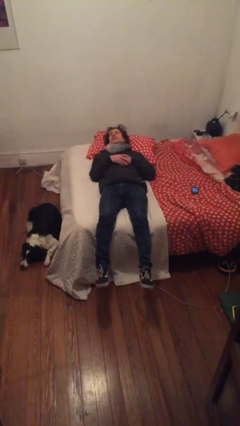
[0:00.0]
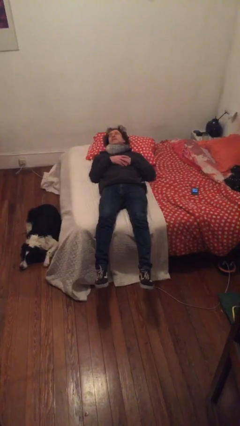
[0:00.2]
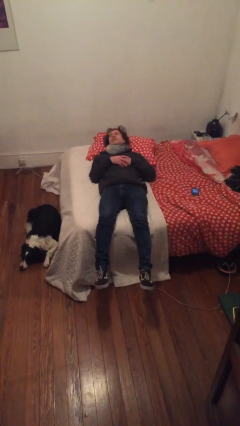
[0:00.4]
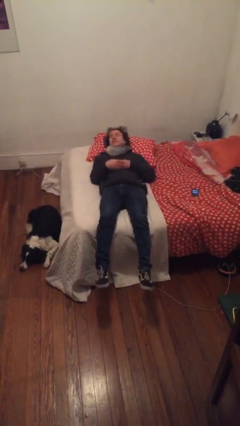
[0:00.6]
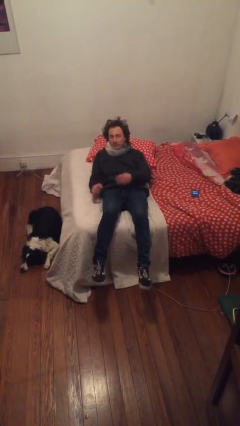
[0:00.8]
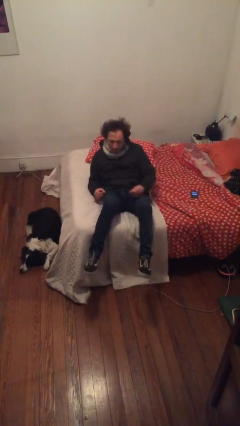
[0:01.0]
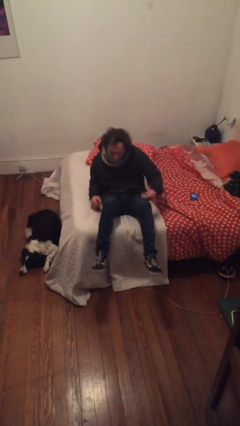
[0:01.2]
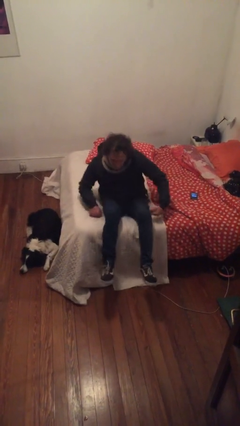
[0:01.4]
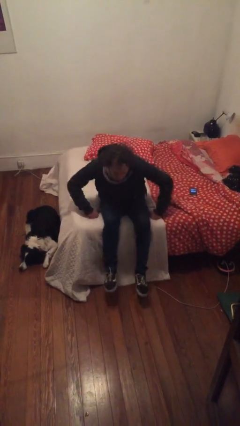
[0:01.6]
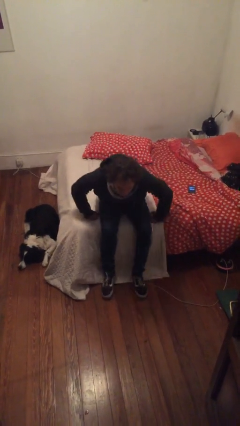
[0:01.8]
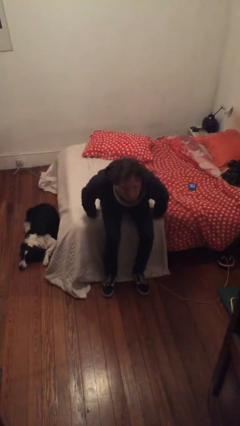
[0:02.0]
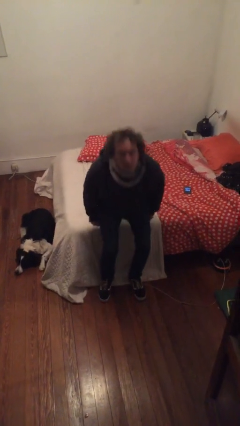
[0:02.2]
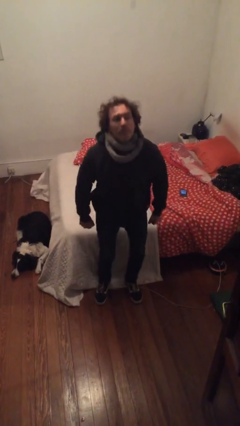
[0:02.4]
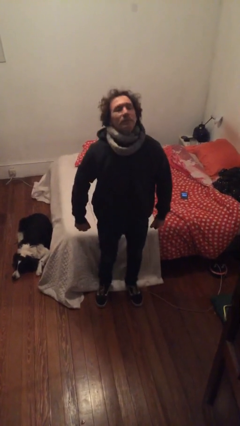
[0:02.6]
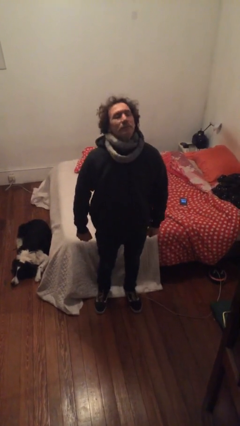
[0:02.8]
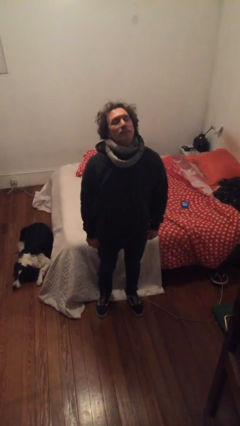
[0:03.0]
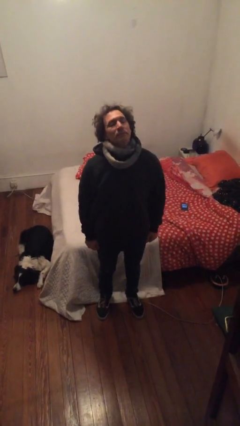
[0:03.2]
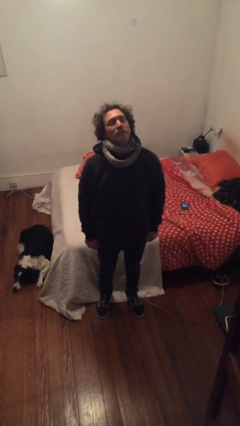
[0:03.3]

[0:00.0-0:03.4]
person stands up

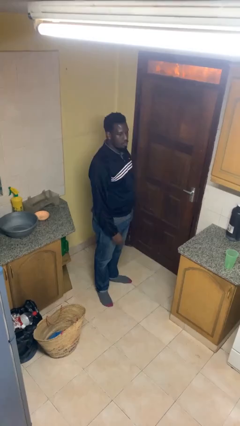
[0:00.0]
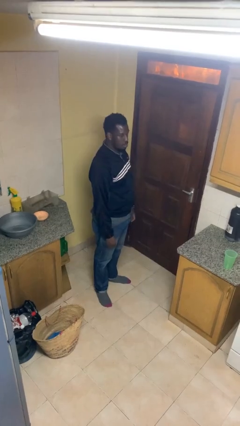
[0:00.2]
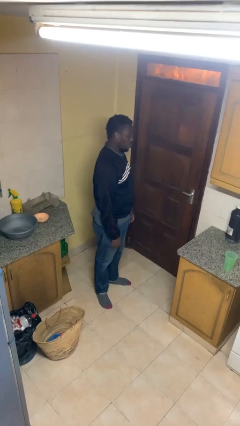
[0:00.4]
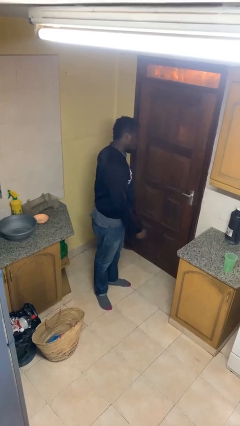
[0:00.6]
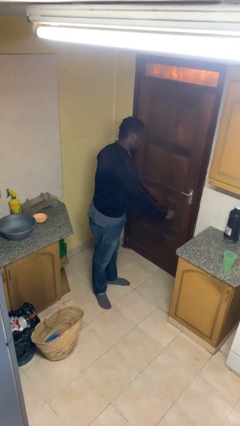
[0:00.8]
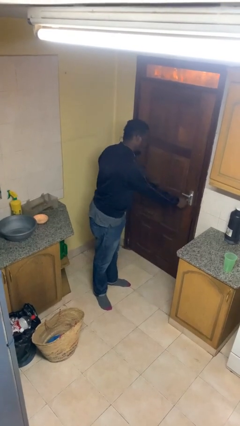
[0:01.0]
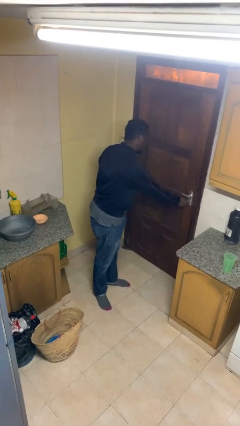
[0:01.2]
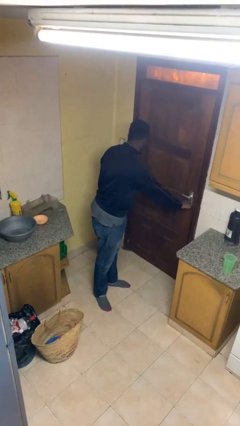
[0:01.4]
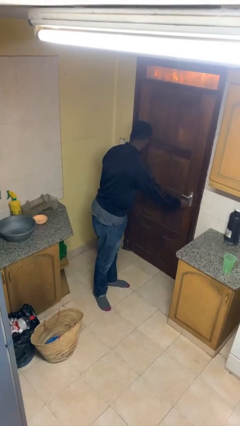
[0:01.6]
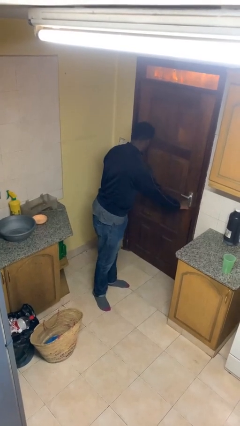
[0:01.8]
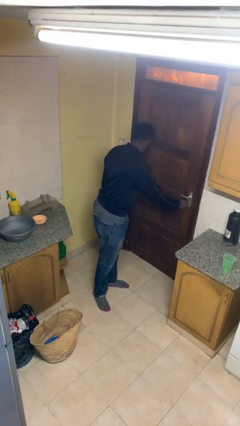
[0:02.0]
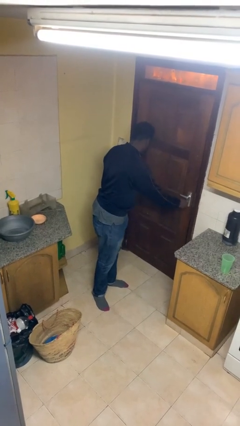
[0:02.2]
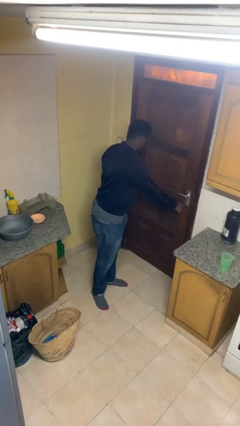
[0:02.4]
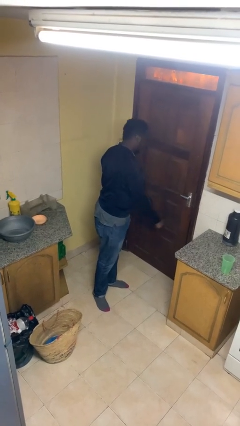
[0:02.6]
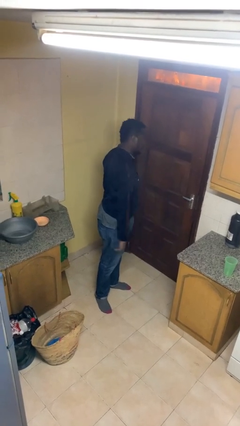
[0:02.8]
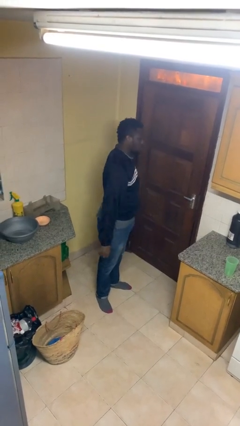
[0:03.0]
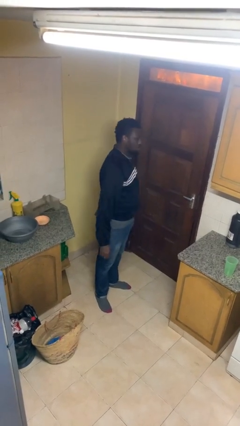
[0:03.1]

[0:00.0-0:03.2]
person unlocks door with keys

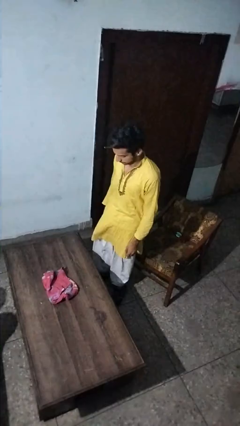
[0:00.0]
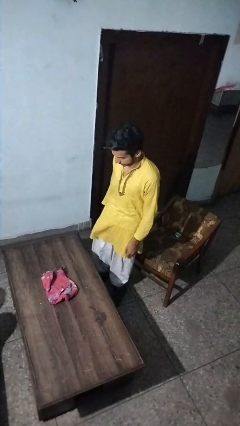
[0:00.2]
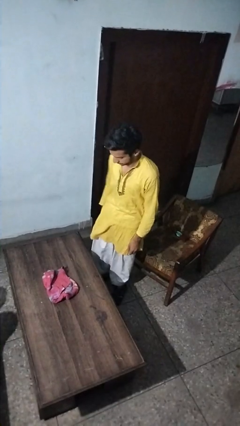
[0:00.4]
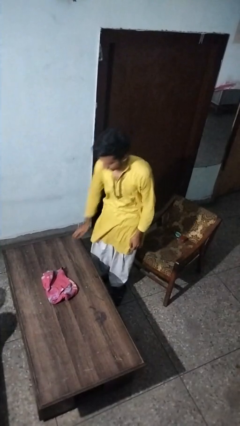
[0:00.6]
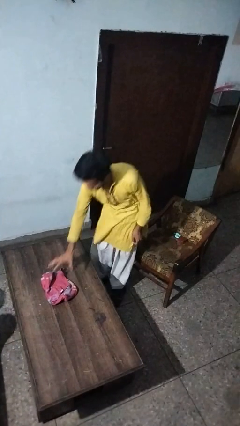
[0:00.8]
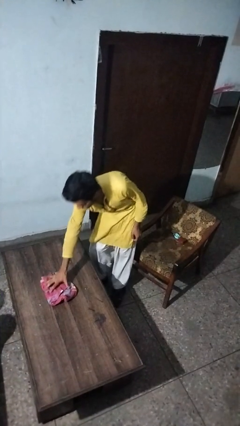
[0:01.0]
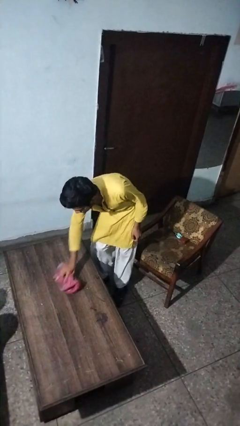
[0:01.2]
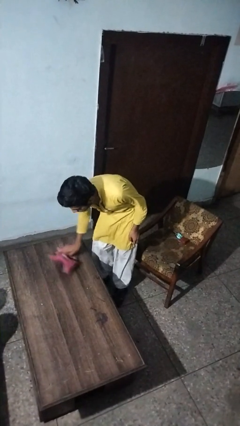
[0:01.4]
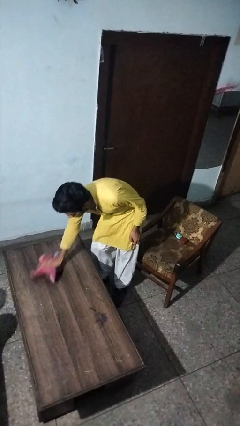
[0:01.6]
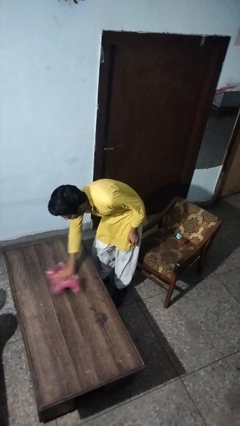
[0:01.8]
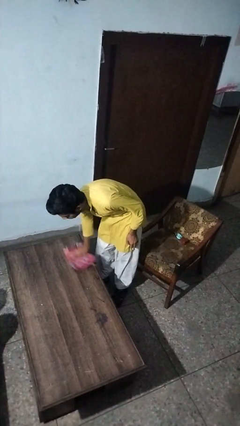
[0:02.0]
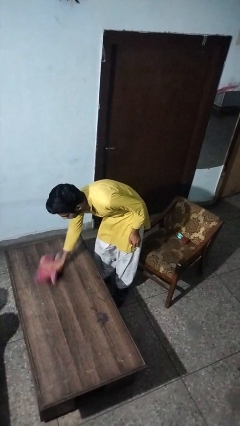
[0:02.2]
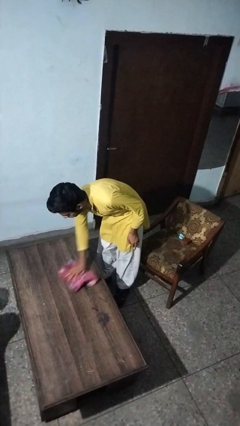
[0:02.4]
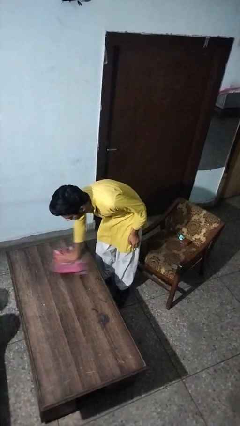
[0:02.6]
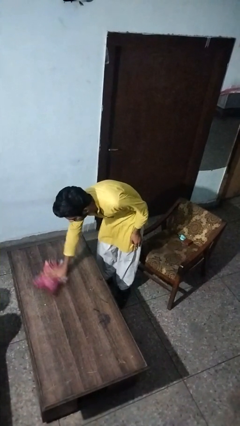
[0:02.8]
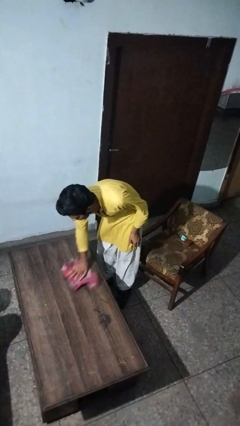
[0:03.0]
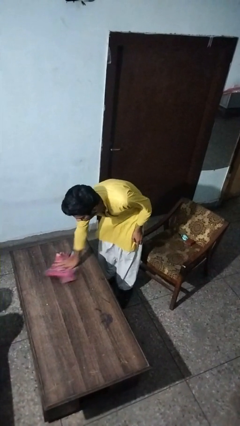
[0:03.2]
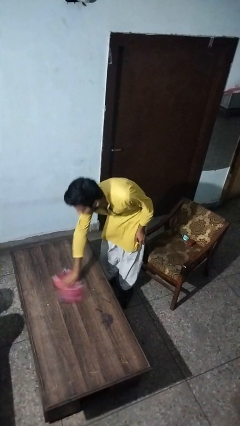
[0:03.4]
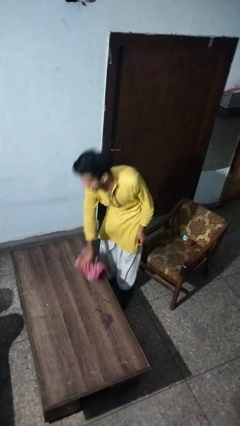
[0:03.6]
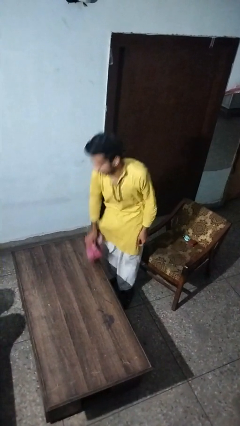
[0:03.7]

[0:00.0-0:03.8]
person cleans table with rag

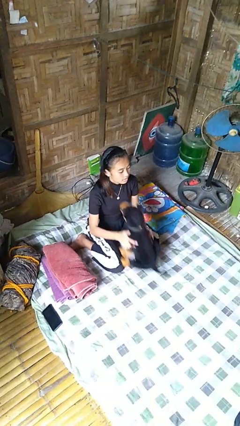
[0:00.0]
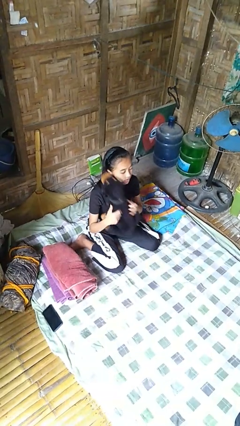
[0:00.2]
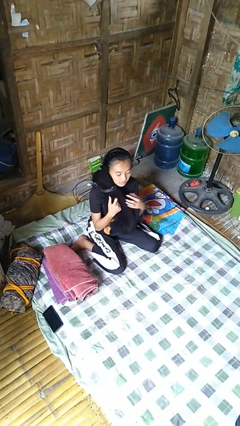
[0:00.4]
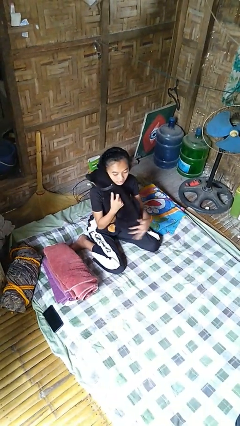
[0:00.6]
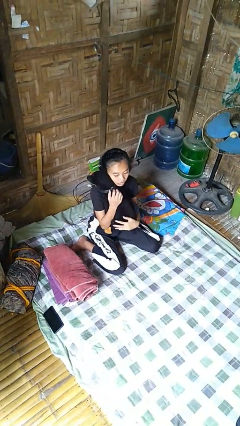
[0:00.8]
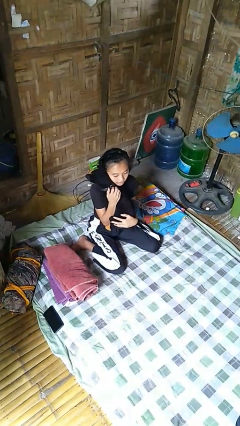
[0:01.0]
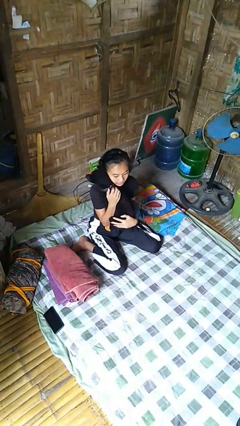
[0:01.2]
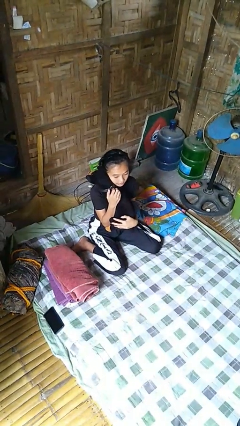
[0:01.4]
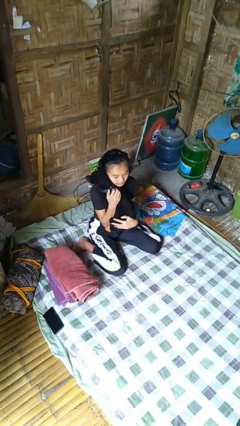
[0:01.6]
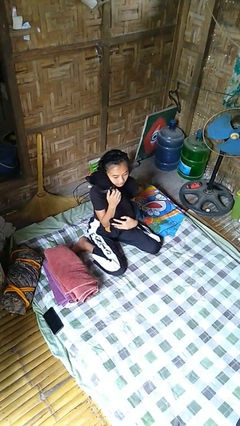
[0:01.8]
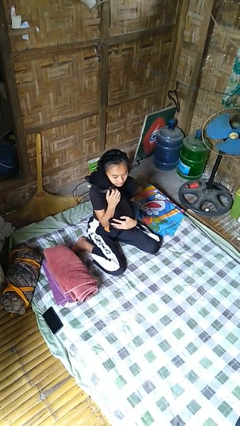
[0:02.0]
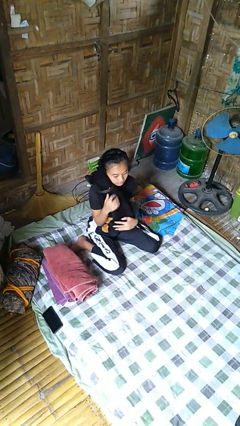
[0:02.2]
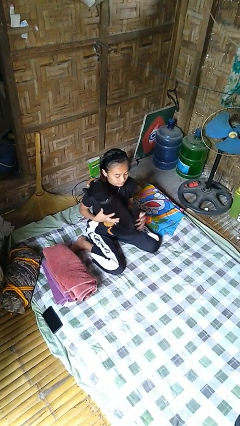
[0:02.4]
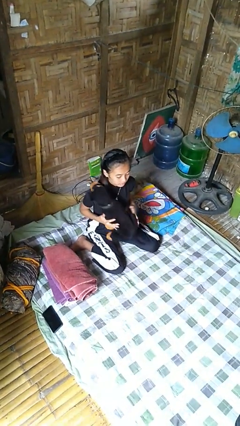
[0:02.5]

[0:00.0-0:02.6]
person hugs stuffed animal

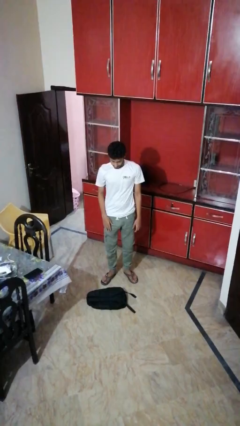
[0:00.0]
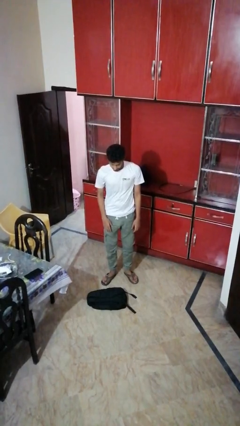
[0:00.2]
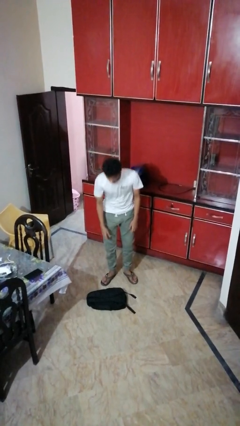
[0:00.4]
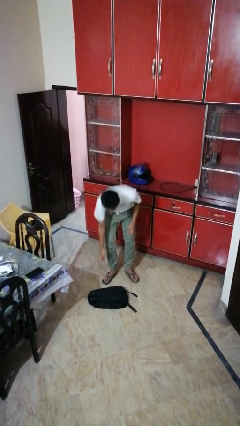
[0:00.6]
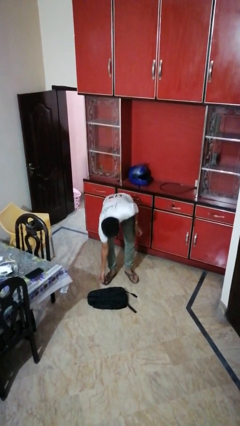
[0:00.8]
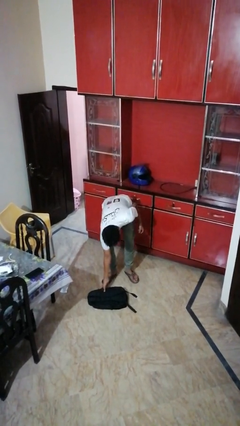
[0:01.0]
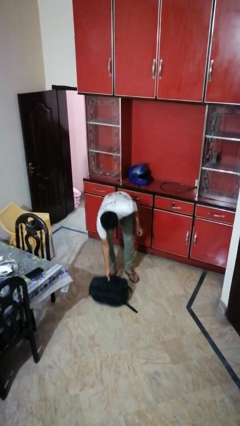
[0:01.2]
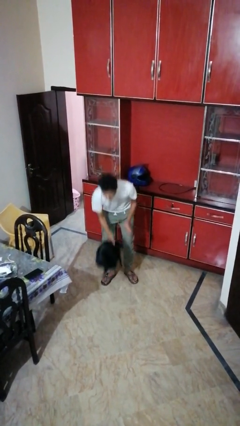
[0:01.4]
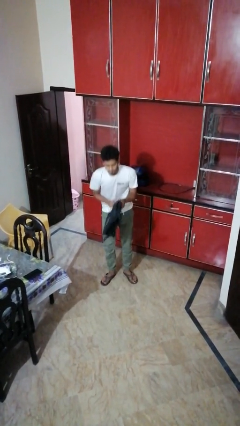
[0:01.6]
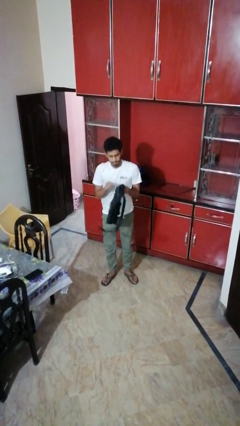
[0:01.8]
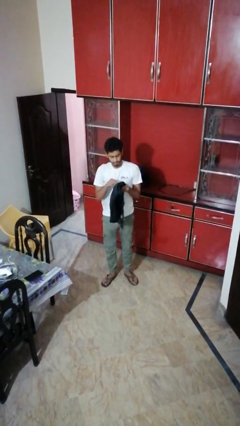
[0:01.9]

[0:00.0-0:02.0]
person picks up object from floor

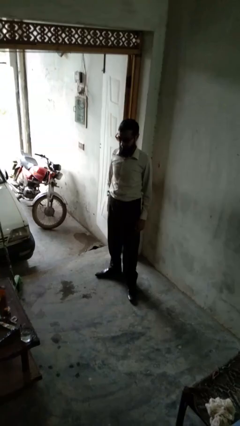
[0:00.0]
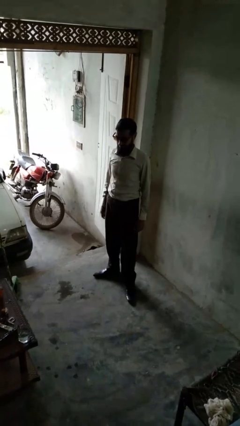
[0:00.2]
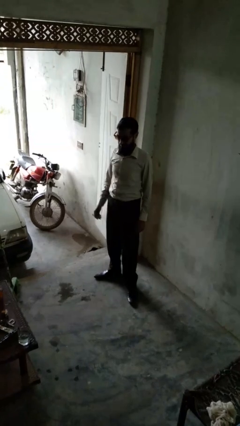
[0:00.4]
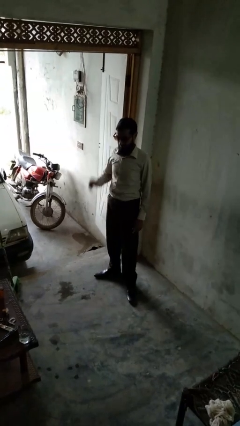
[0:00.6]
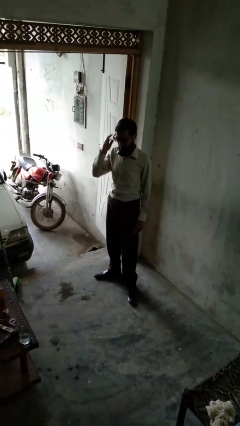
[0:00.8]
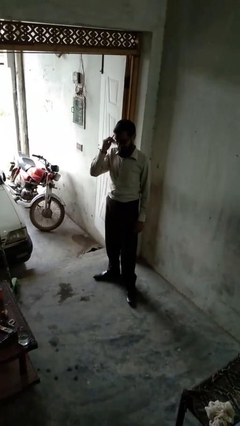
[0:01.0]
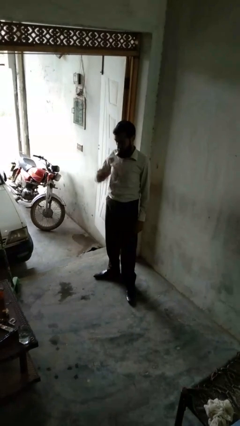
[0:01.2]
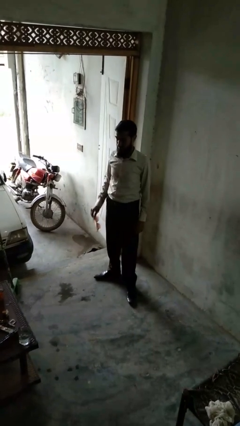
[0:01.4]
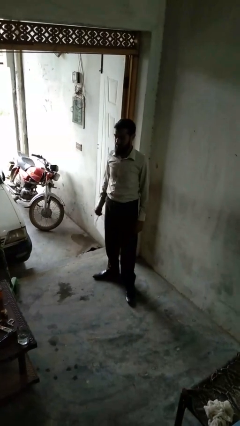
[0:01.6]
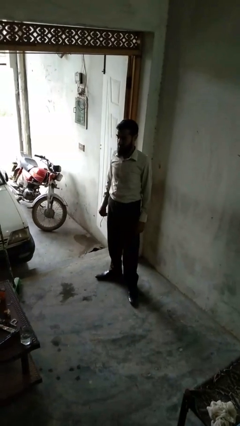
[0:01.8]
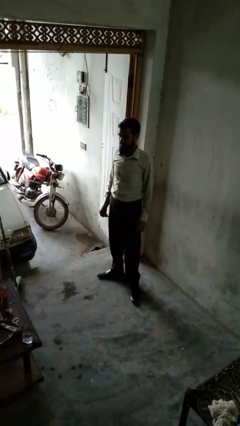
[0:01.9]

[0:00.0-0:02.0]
person takes off sunglasses
